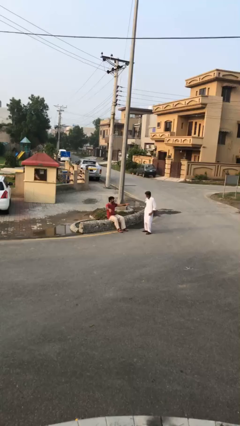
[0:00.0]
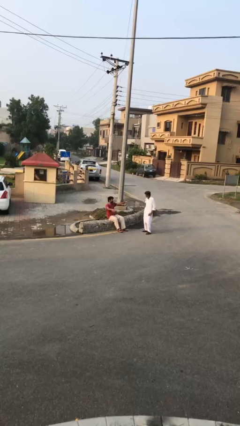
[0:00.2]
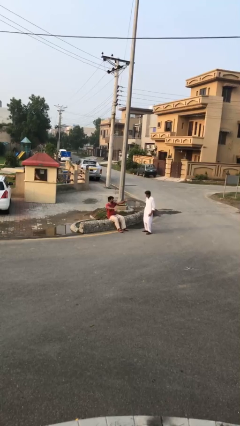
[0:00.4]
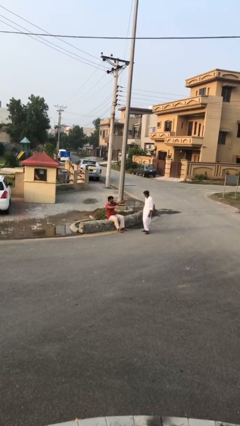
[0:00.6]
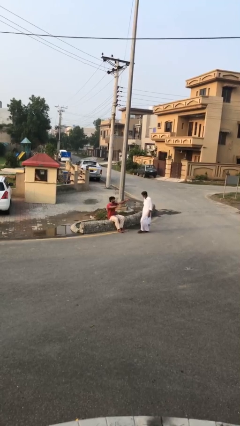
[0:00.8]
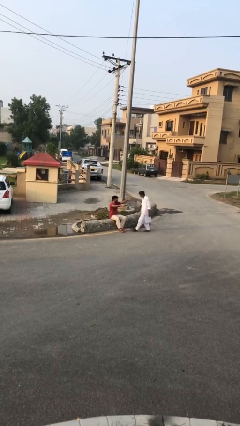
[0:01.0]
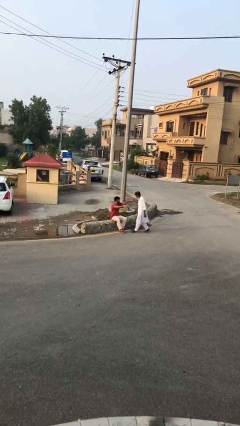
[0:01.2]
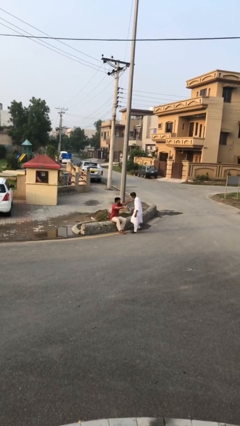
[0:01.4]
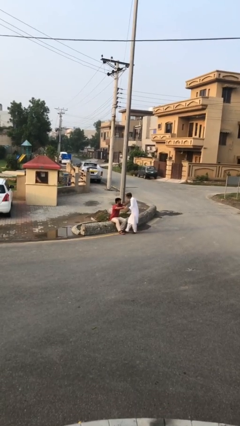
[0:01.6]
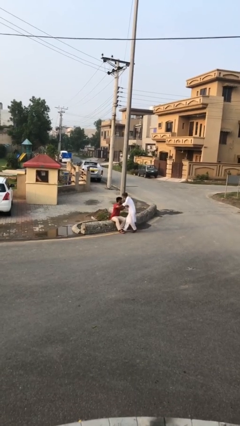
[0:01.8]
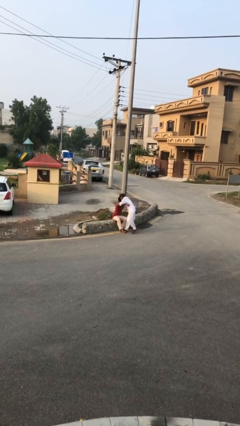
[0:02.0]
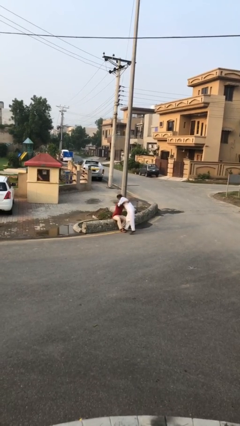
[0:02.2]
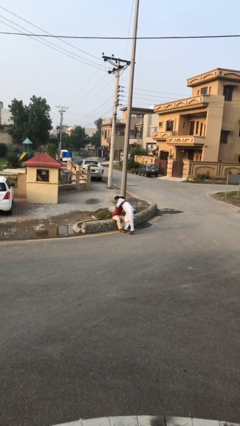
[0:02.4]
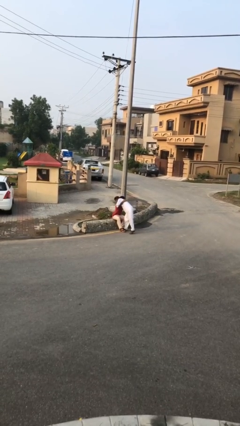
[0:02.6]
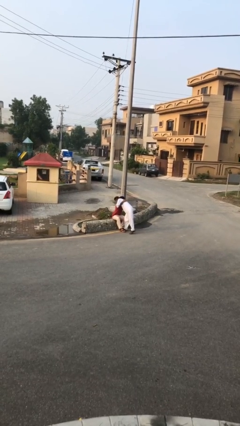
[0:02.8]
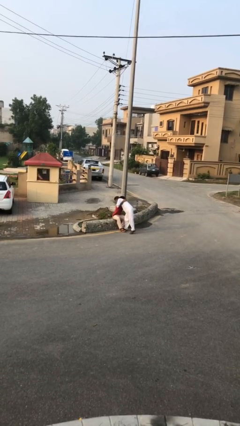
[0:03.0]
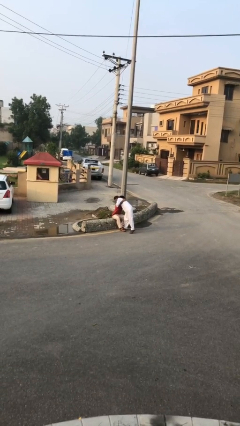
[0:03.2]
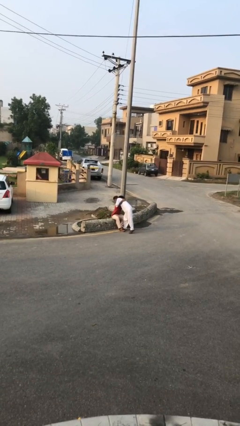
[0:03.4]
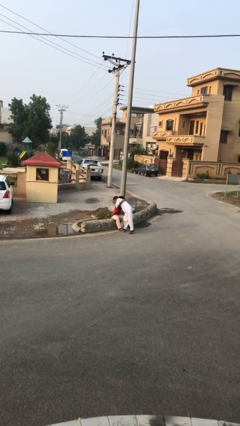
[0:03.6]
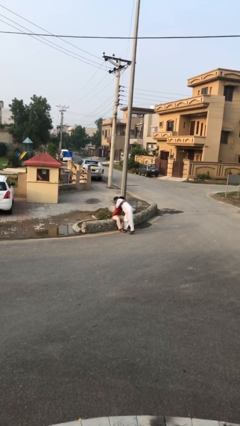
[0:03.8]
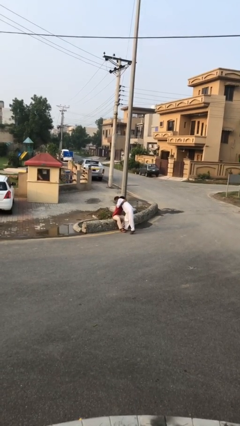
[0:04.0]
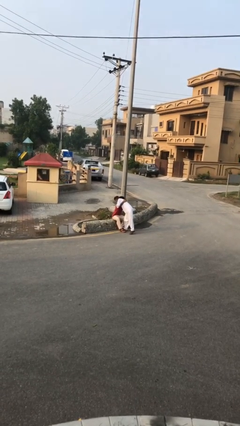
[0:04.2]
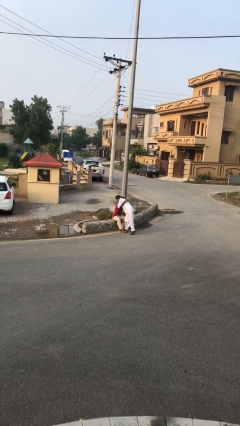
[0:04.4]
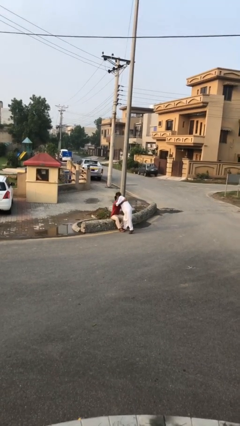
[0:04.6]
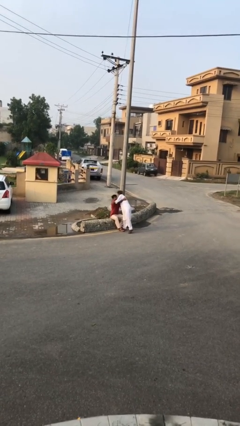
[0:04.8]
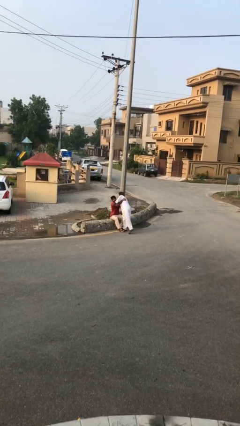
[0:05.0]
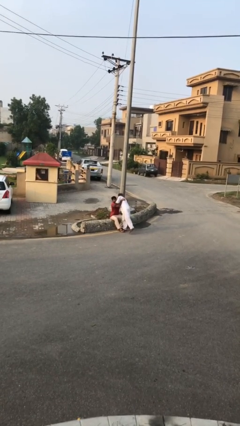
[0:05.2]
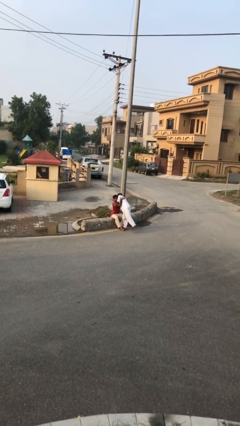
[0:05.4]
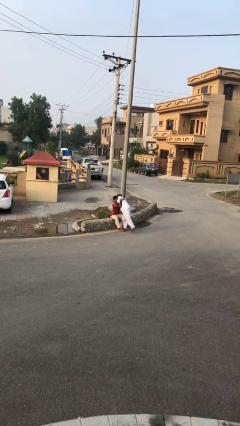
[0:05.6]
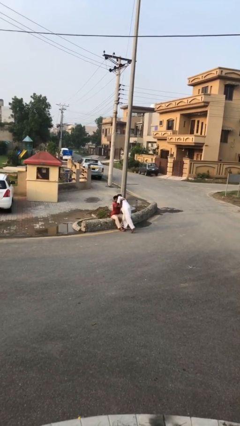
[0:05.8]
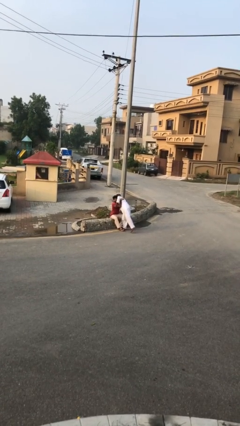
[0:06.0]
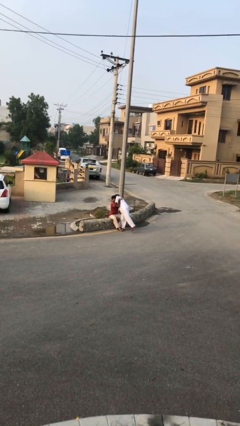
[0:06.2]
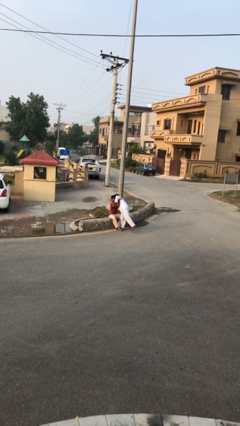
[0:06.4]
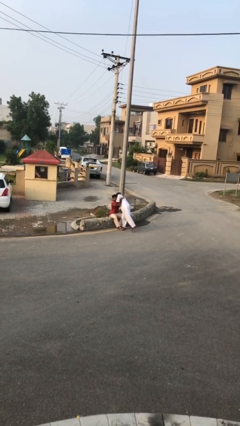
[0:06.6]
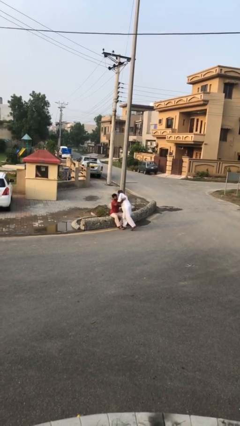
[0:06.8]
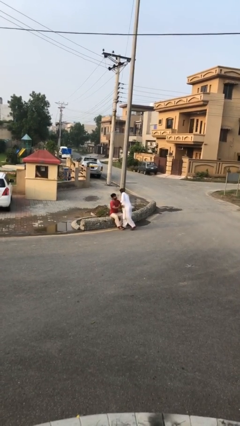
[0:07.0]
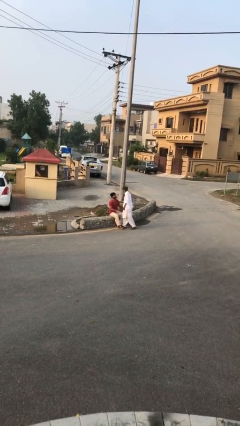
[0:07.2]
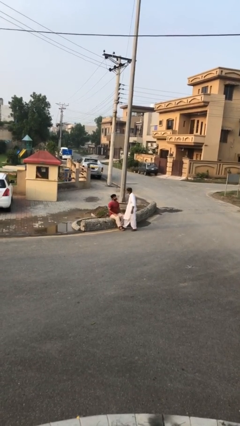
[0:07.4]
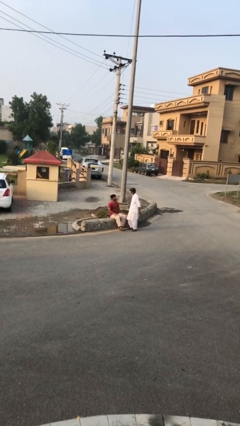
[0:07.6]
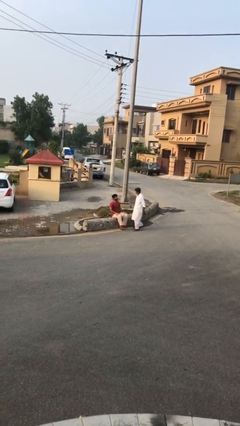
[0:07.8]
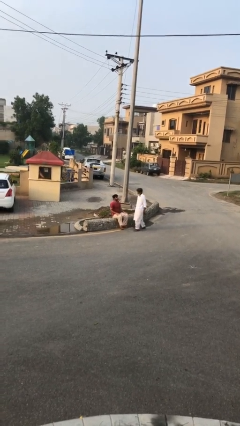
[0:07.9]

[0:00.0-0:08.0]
person embraces person

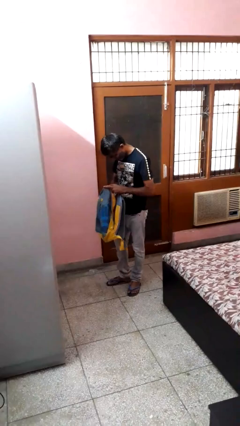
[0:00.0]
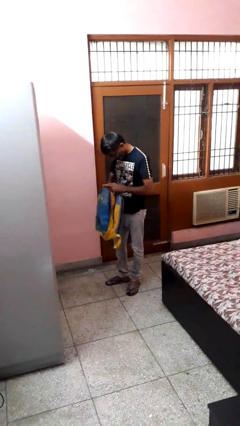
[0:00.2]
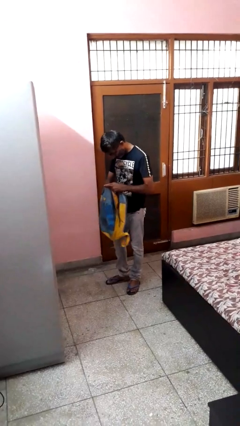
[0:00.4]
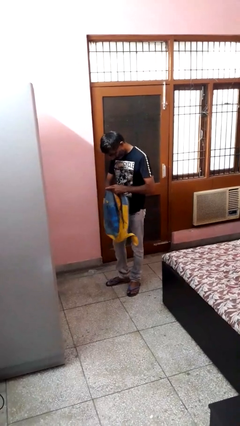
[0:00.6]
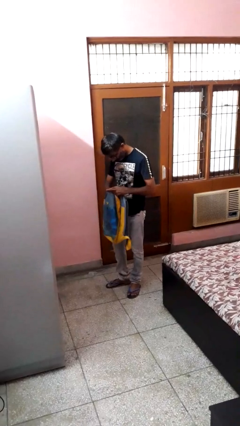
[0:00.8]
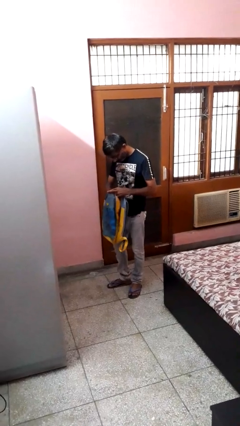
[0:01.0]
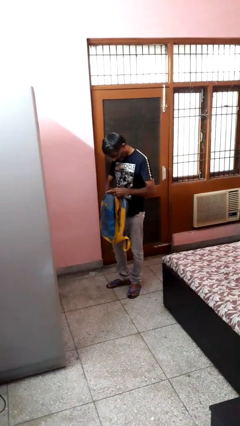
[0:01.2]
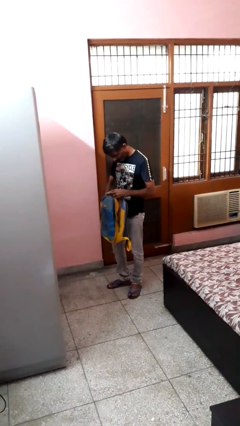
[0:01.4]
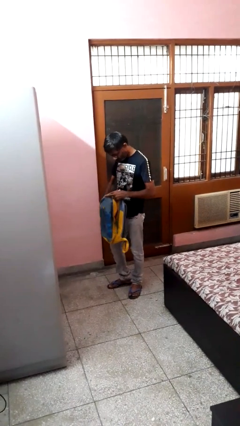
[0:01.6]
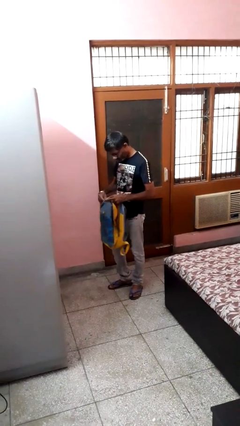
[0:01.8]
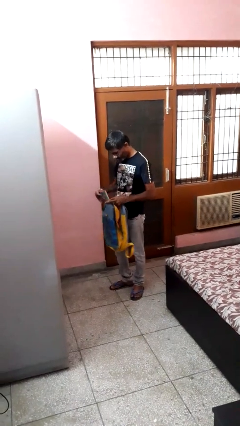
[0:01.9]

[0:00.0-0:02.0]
person searches in backpack

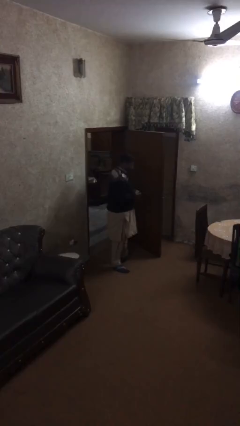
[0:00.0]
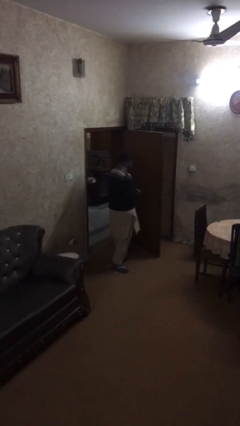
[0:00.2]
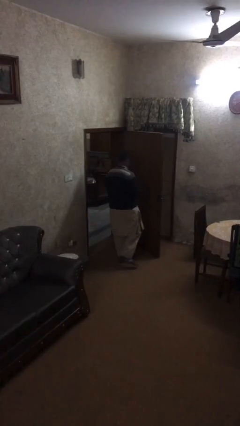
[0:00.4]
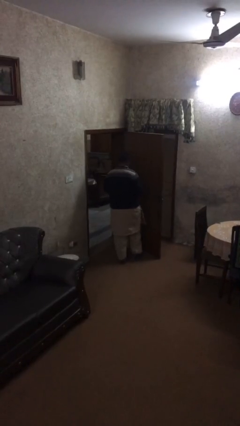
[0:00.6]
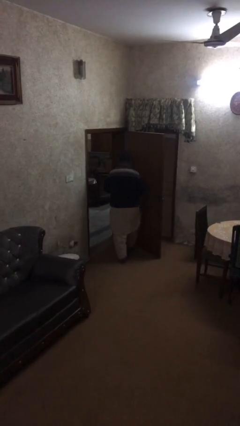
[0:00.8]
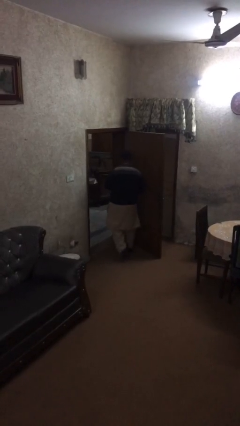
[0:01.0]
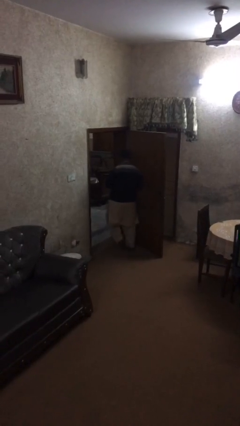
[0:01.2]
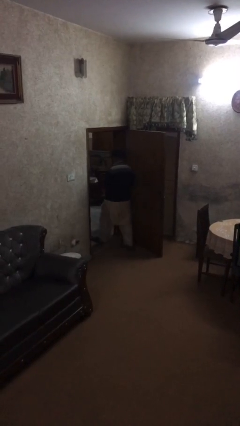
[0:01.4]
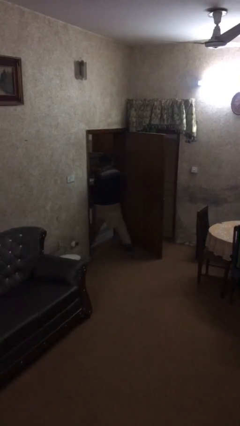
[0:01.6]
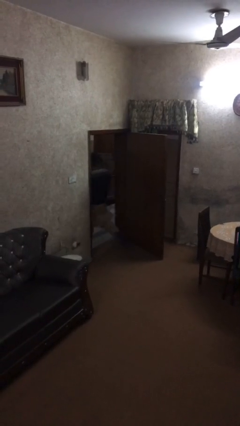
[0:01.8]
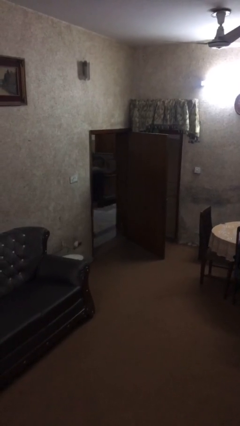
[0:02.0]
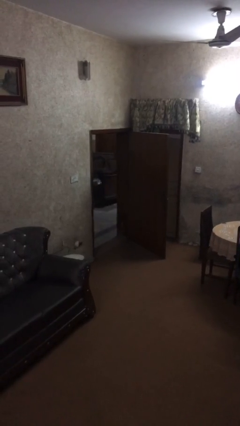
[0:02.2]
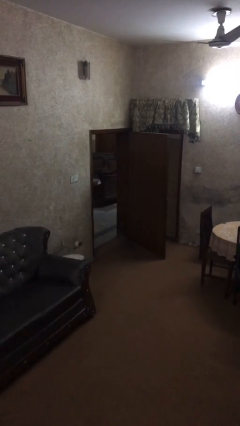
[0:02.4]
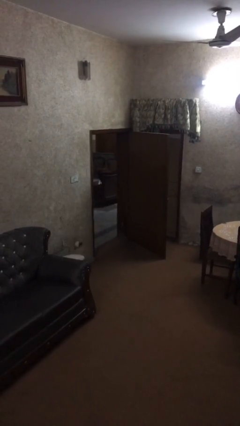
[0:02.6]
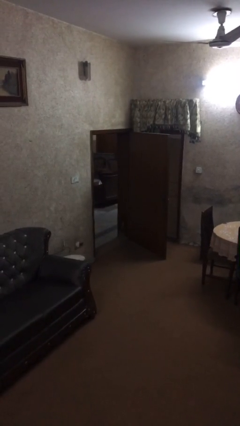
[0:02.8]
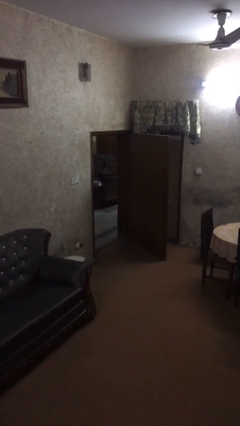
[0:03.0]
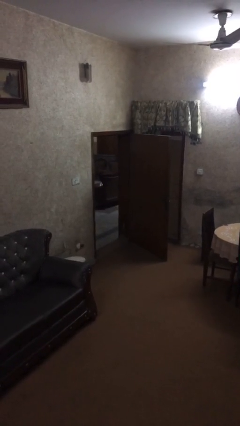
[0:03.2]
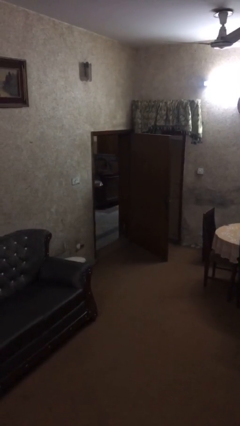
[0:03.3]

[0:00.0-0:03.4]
person exits scene through structure

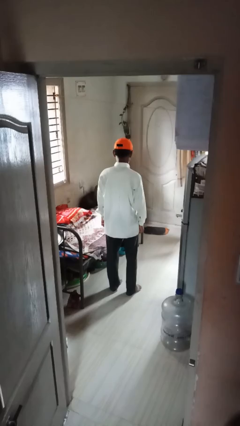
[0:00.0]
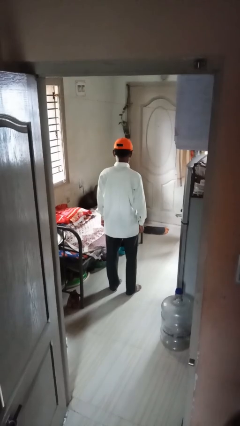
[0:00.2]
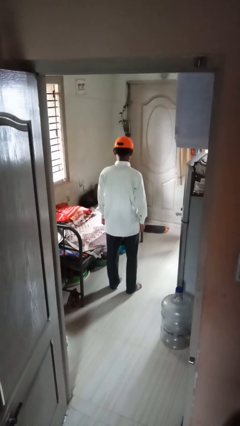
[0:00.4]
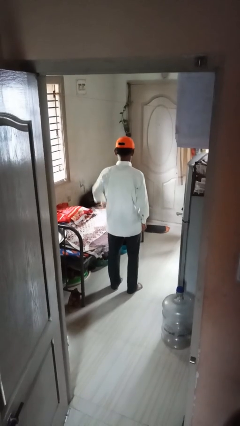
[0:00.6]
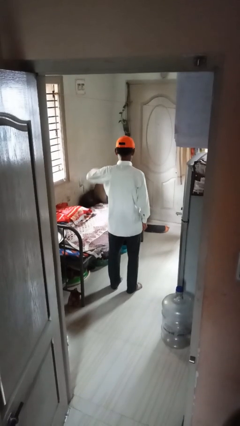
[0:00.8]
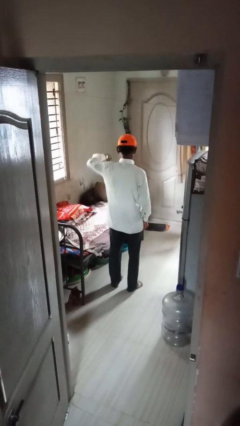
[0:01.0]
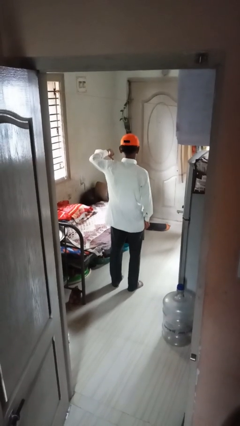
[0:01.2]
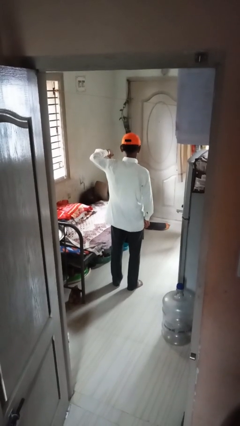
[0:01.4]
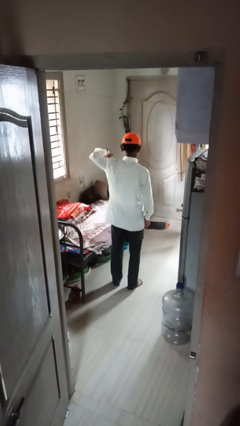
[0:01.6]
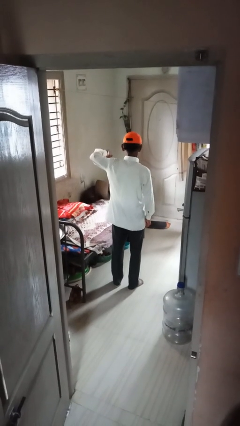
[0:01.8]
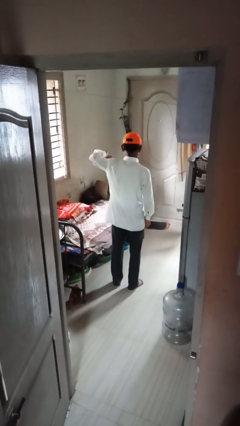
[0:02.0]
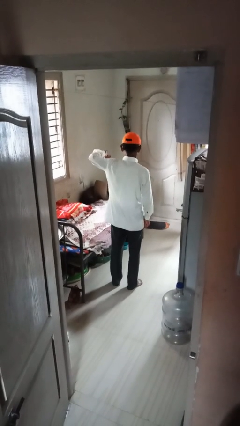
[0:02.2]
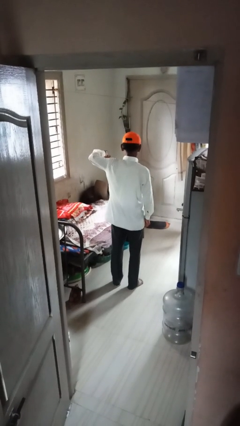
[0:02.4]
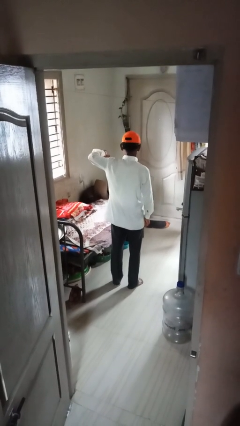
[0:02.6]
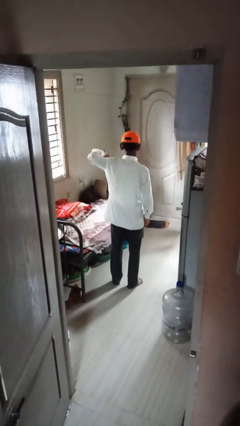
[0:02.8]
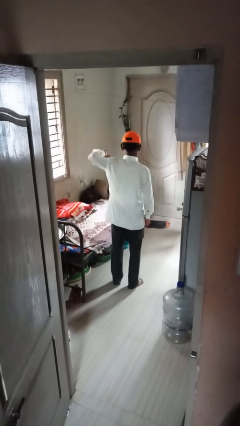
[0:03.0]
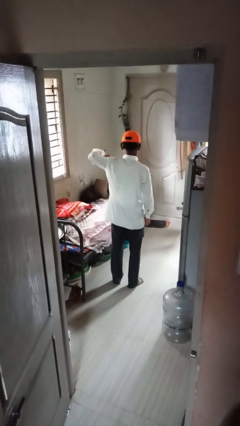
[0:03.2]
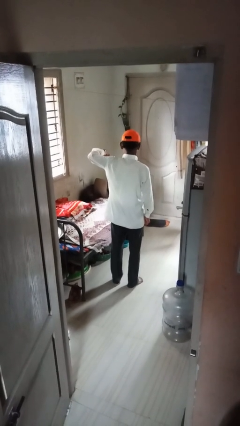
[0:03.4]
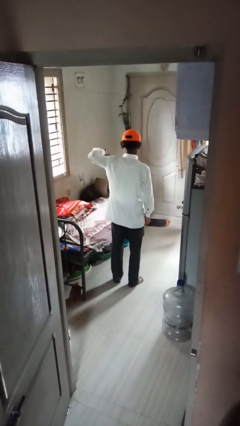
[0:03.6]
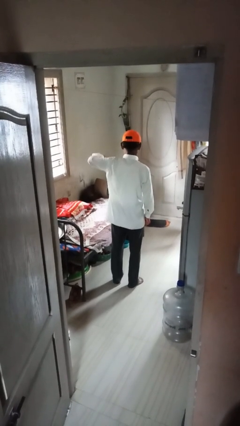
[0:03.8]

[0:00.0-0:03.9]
person gestures thumbs down

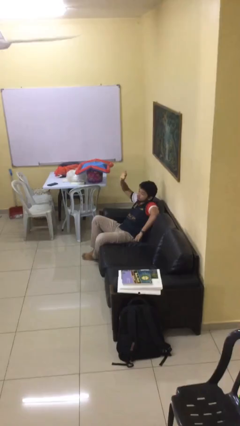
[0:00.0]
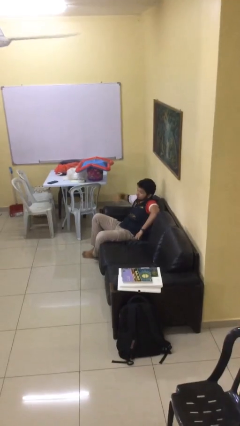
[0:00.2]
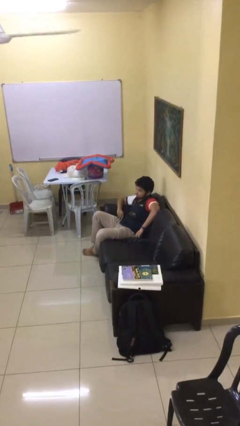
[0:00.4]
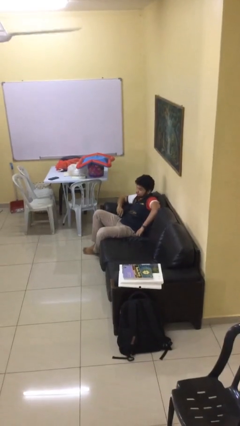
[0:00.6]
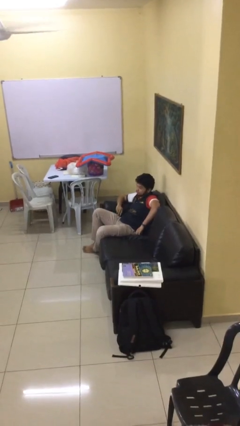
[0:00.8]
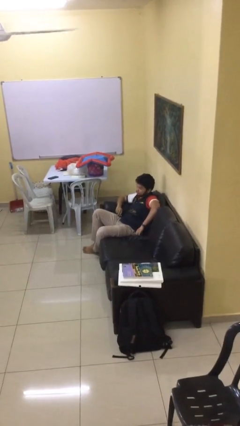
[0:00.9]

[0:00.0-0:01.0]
person gestures swipe down
